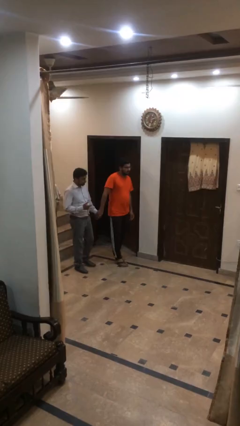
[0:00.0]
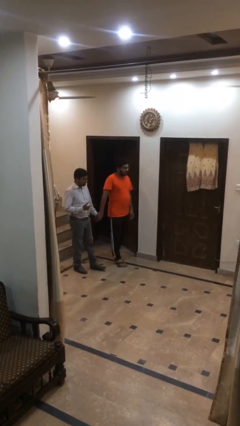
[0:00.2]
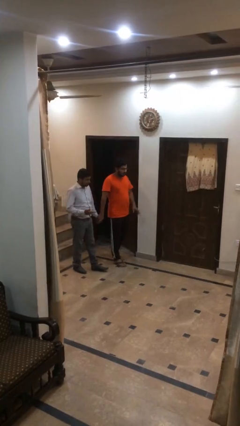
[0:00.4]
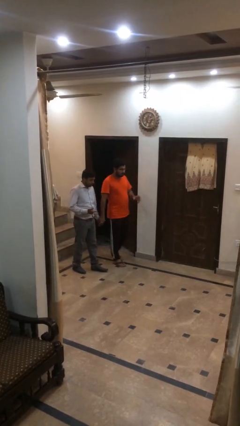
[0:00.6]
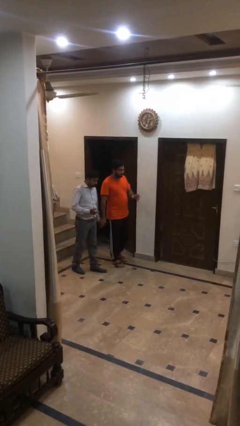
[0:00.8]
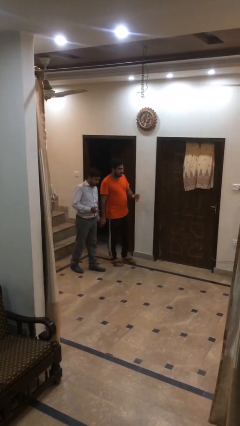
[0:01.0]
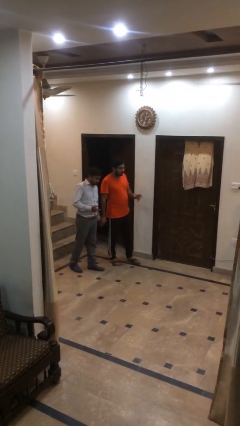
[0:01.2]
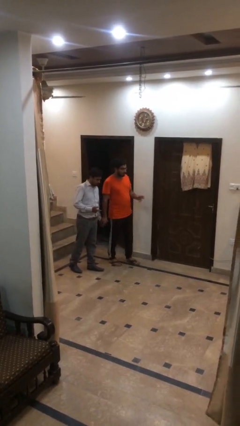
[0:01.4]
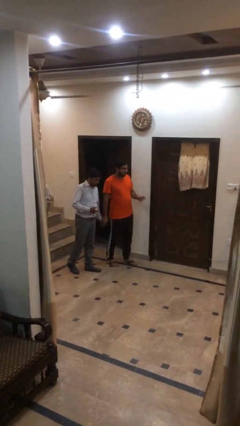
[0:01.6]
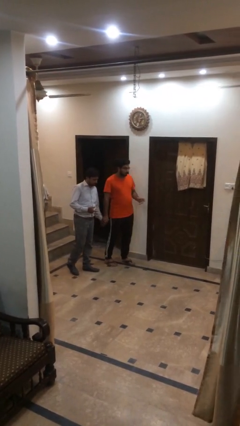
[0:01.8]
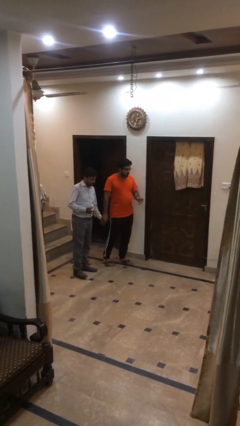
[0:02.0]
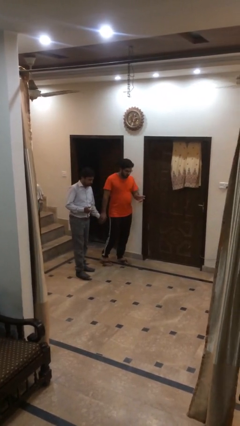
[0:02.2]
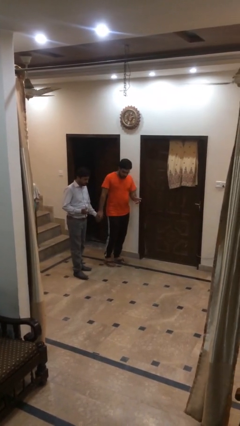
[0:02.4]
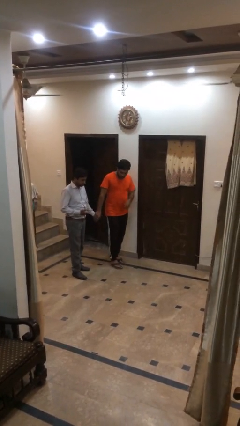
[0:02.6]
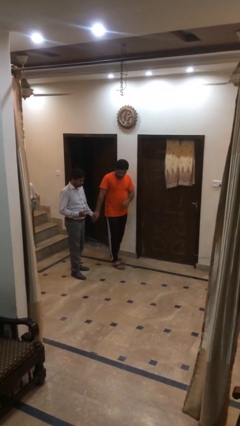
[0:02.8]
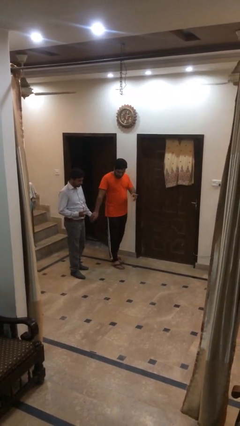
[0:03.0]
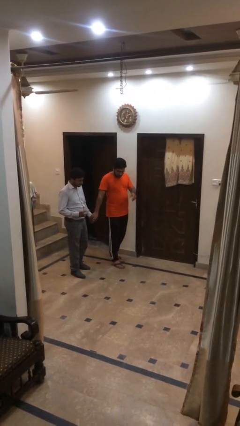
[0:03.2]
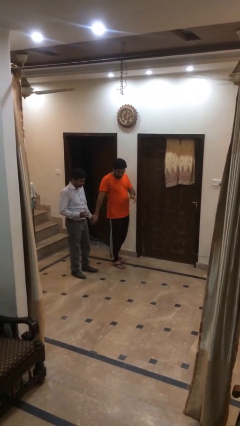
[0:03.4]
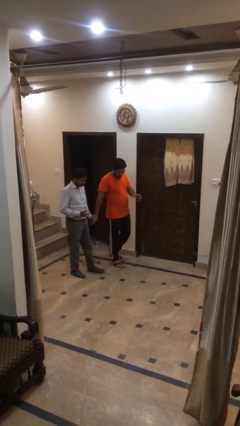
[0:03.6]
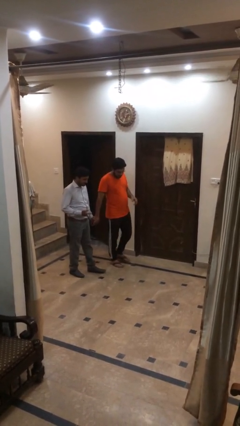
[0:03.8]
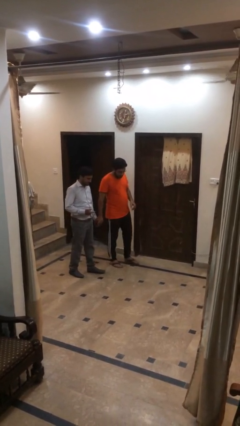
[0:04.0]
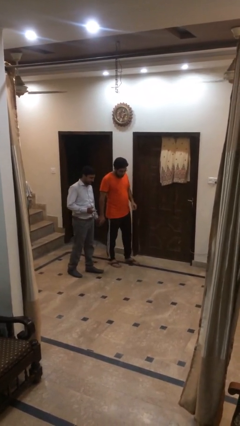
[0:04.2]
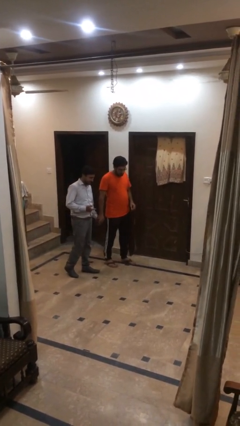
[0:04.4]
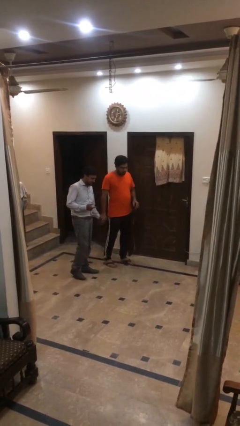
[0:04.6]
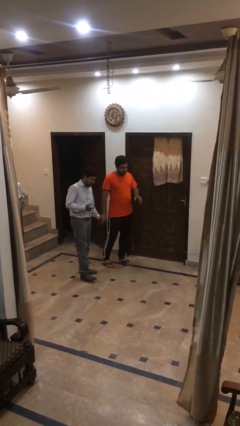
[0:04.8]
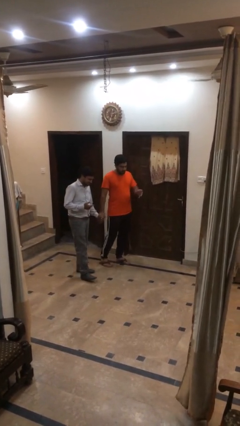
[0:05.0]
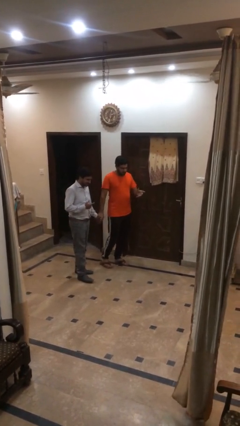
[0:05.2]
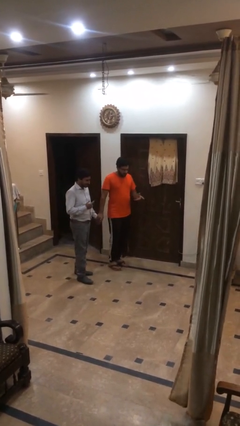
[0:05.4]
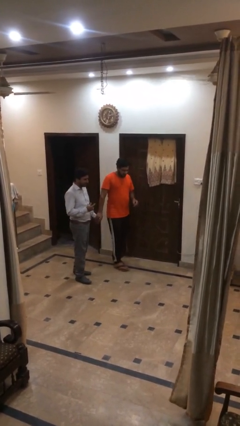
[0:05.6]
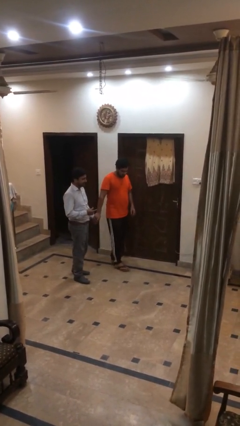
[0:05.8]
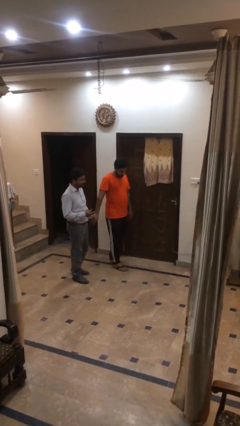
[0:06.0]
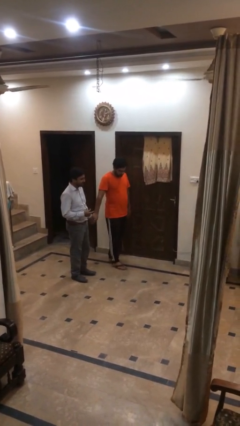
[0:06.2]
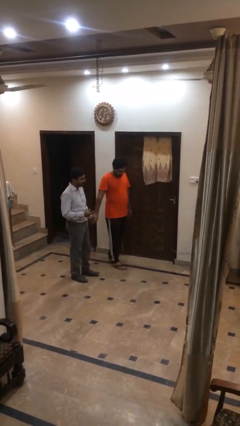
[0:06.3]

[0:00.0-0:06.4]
person holds hand

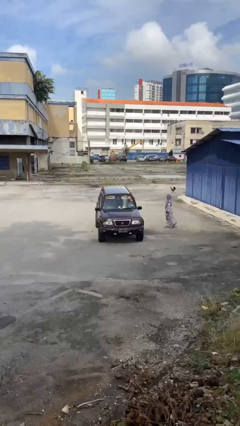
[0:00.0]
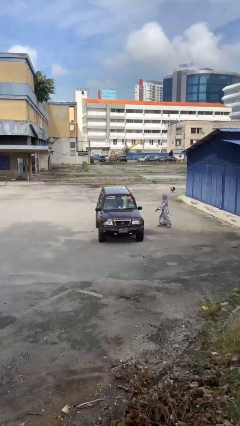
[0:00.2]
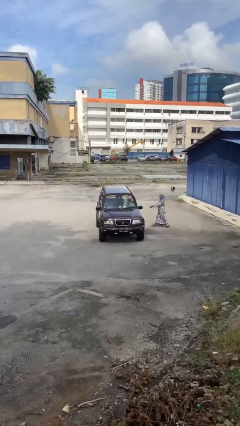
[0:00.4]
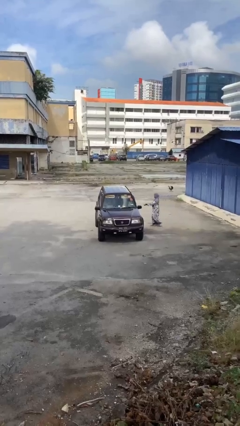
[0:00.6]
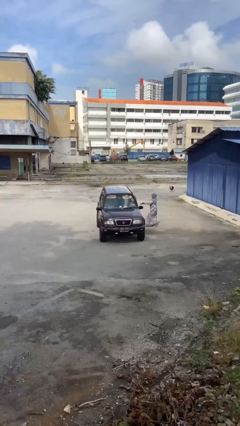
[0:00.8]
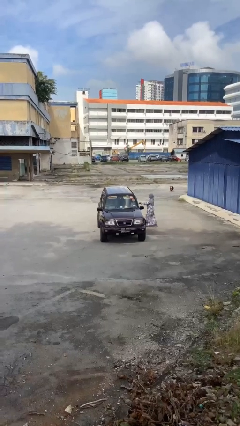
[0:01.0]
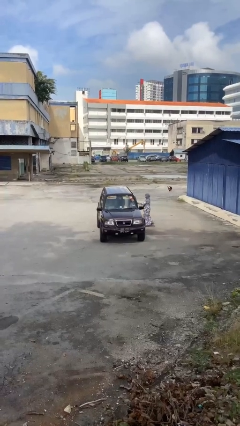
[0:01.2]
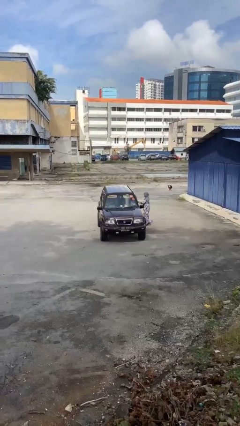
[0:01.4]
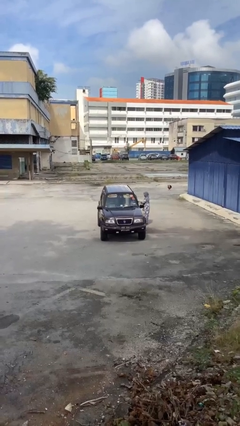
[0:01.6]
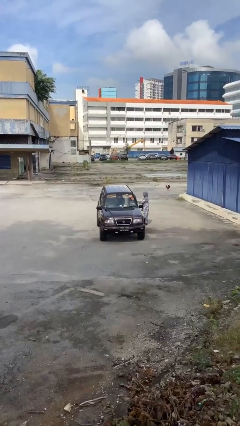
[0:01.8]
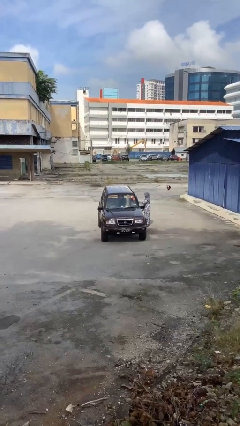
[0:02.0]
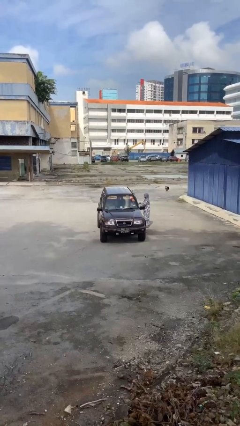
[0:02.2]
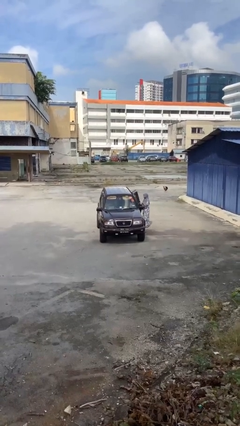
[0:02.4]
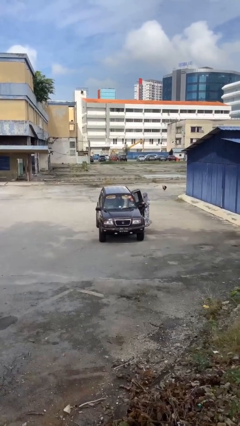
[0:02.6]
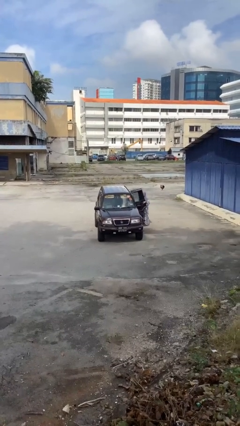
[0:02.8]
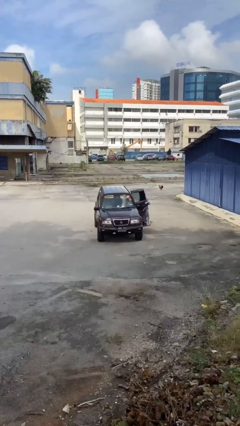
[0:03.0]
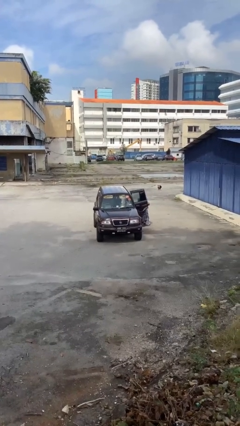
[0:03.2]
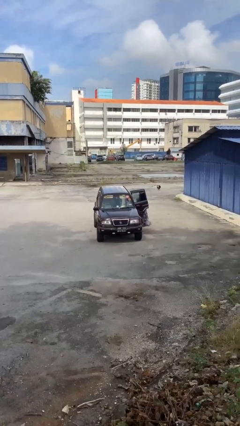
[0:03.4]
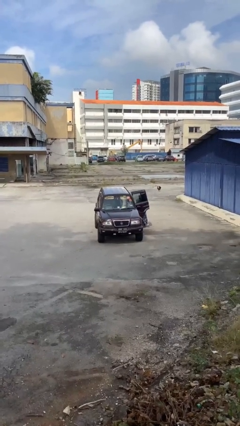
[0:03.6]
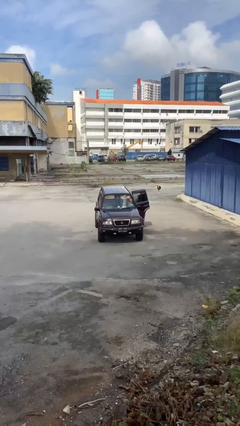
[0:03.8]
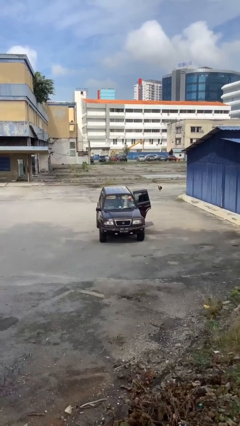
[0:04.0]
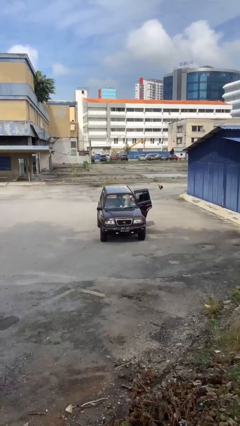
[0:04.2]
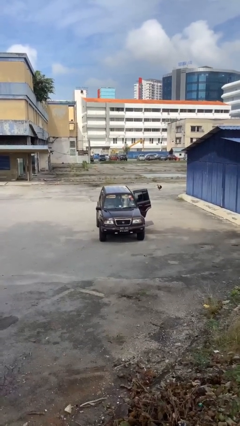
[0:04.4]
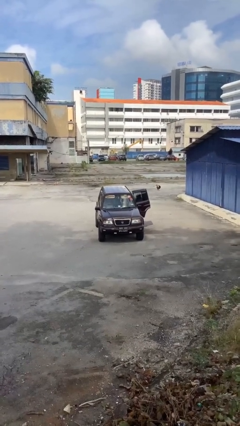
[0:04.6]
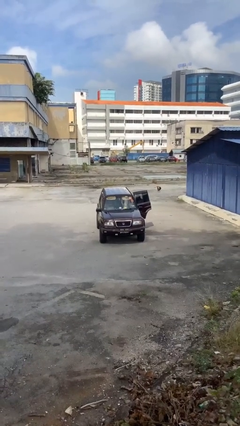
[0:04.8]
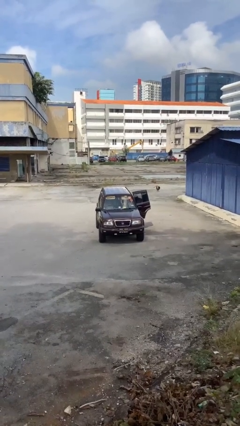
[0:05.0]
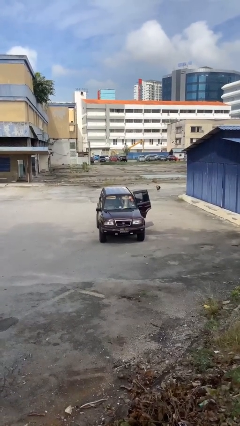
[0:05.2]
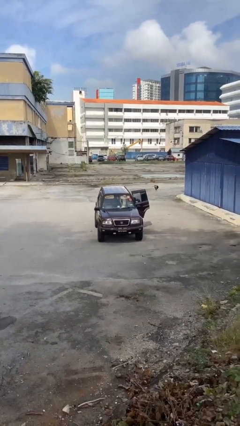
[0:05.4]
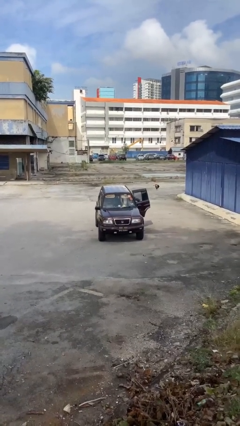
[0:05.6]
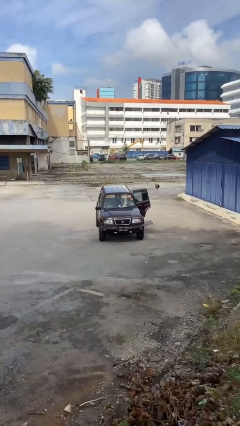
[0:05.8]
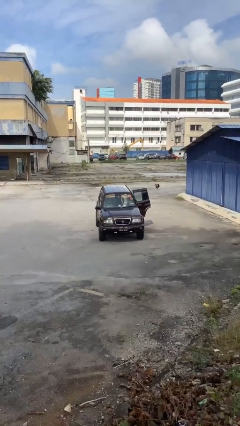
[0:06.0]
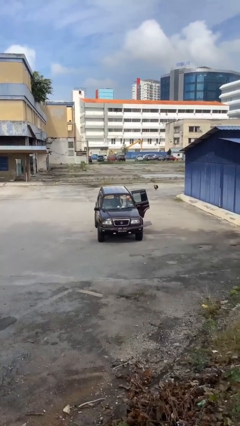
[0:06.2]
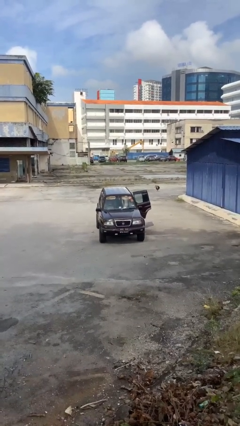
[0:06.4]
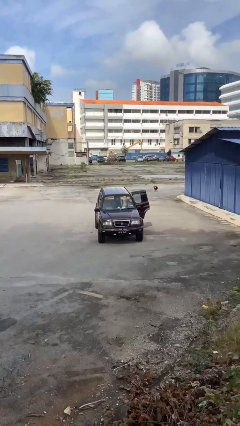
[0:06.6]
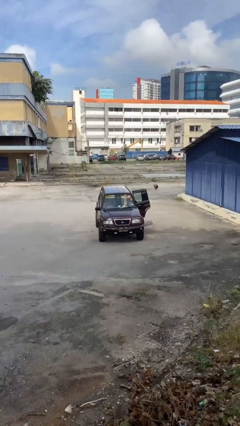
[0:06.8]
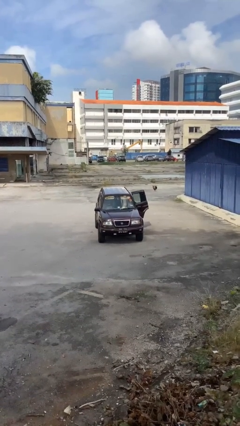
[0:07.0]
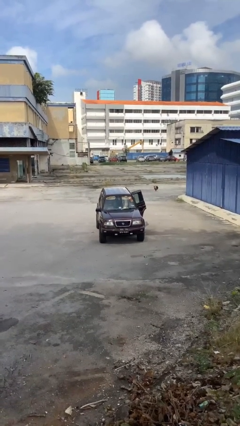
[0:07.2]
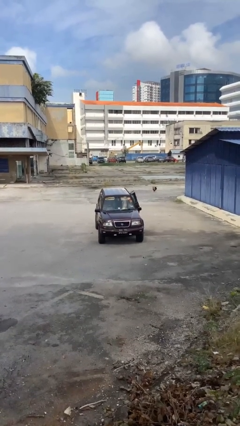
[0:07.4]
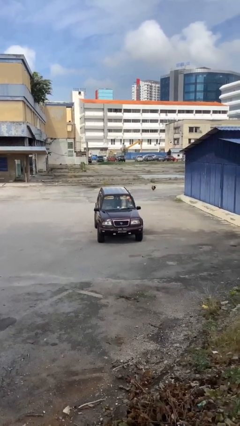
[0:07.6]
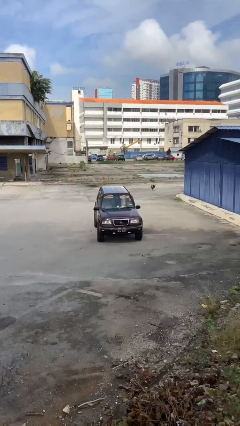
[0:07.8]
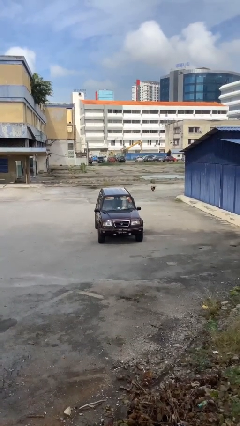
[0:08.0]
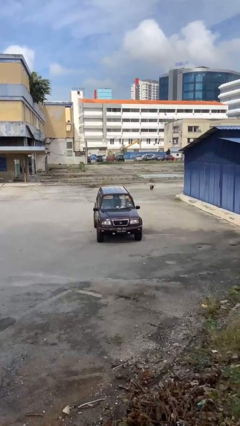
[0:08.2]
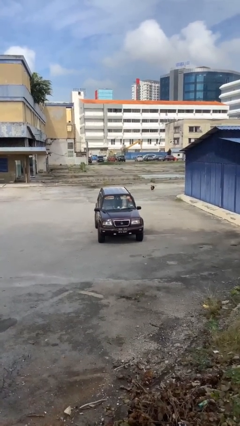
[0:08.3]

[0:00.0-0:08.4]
car picks up person

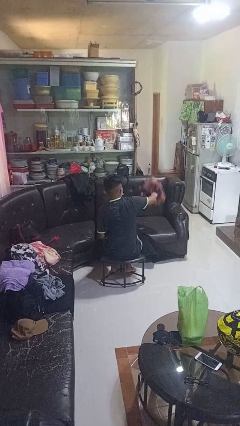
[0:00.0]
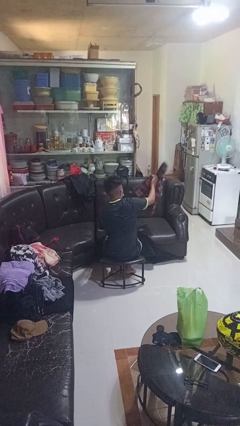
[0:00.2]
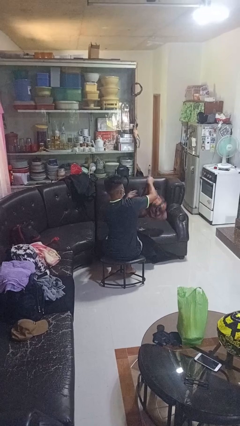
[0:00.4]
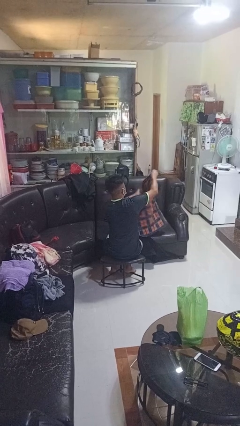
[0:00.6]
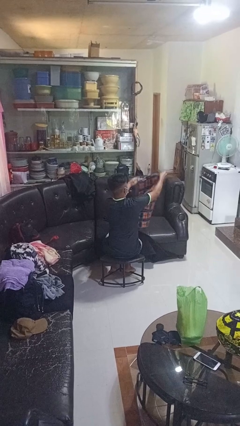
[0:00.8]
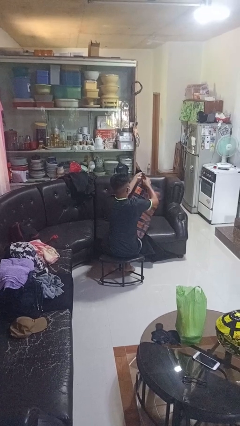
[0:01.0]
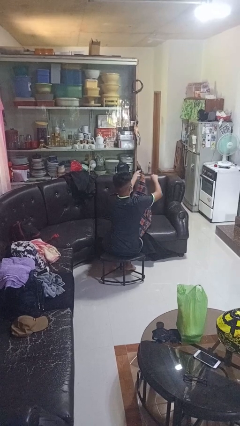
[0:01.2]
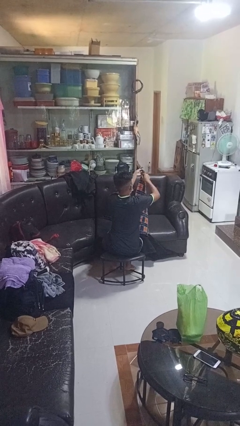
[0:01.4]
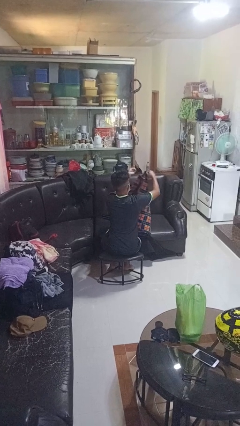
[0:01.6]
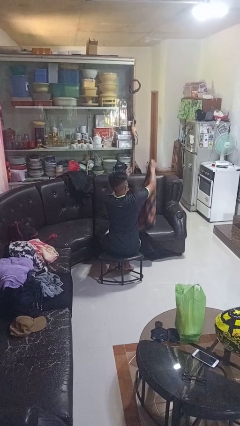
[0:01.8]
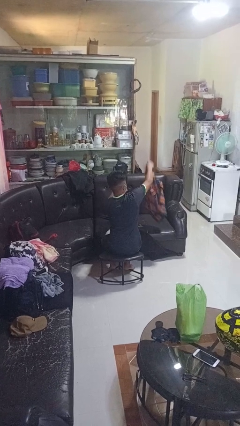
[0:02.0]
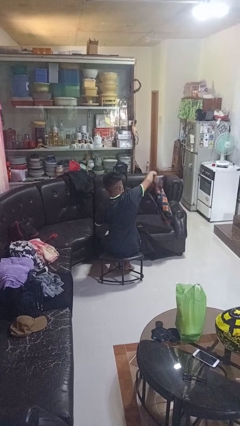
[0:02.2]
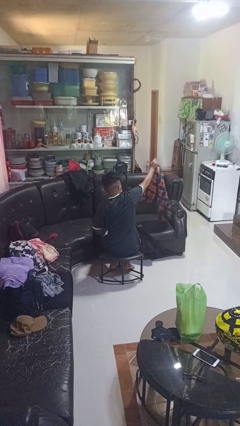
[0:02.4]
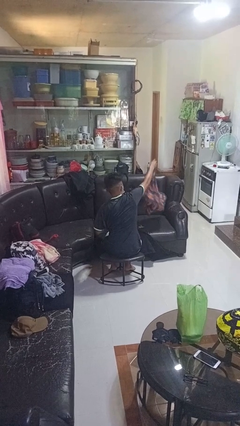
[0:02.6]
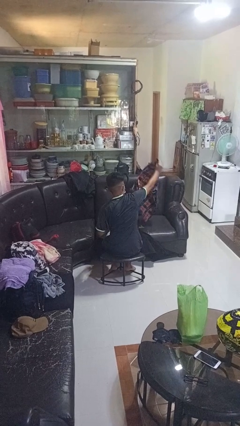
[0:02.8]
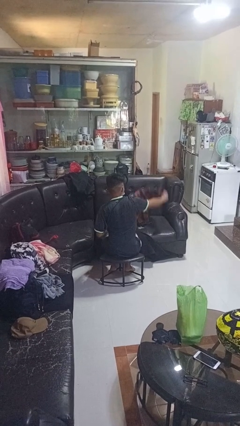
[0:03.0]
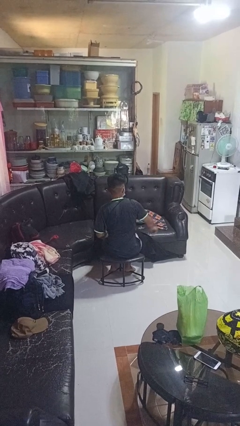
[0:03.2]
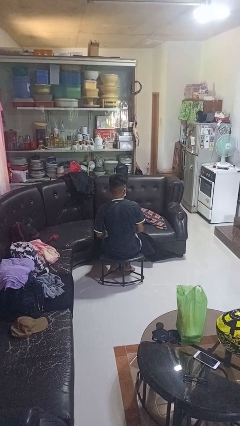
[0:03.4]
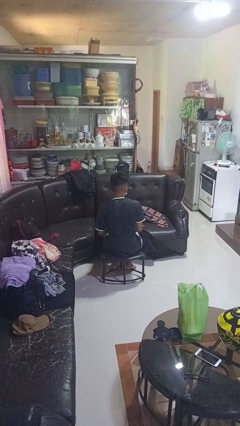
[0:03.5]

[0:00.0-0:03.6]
person unfolds blanket
